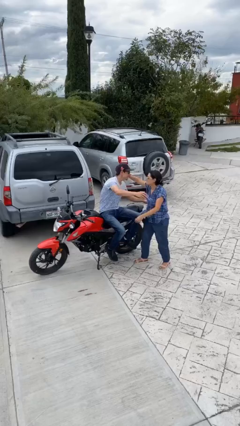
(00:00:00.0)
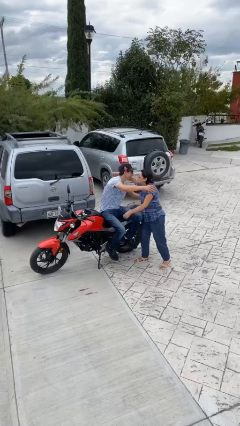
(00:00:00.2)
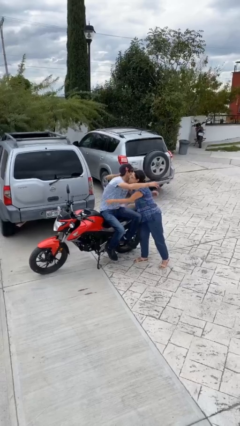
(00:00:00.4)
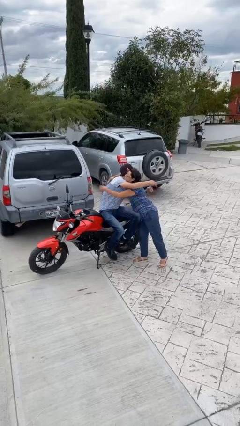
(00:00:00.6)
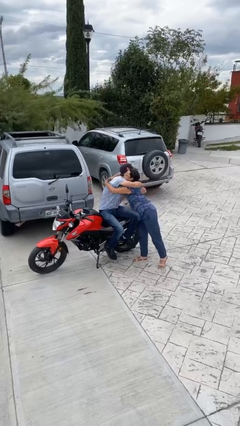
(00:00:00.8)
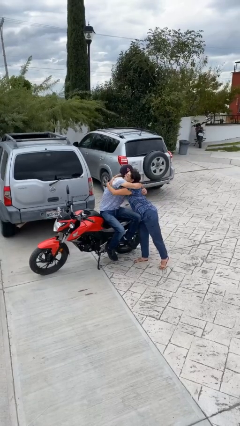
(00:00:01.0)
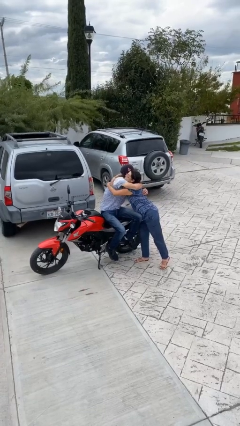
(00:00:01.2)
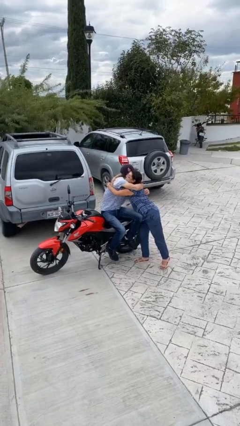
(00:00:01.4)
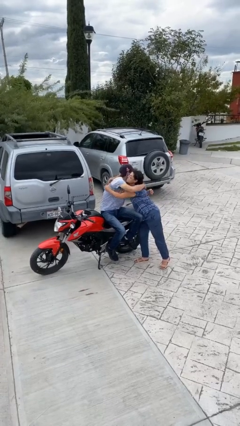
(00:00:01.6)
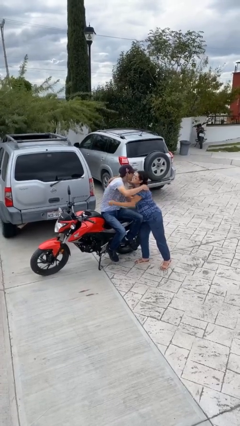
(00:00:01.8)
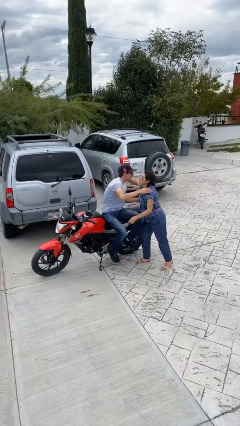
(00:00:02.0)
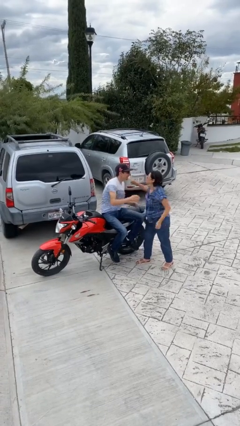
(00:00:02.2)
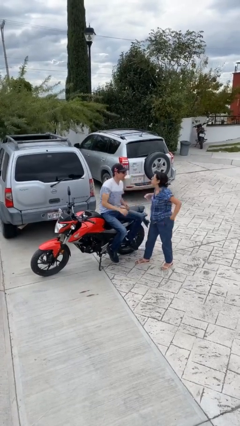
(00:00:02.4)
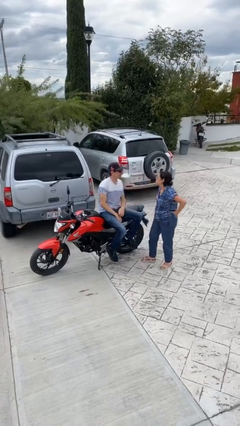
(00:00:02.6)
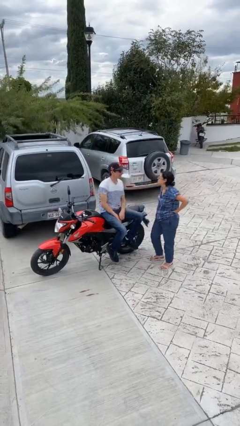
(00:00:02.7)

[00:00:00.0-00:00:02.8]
person embraces person

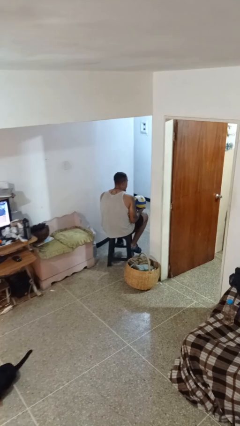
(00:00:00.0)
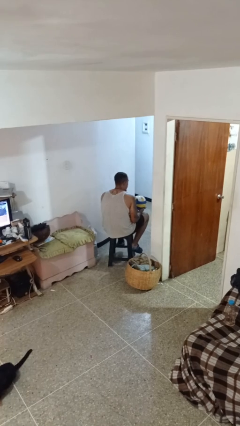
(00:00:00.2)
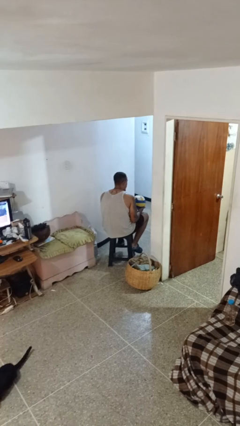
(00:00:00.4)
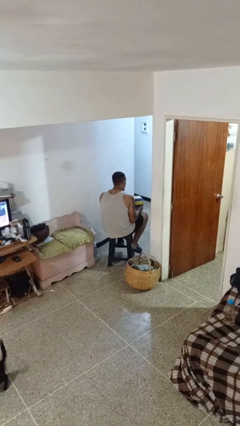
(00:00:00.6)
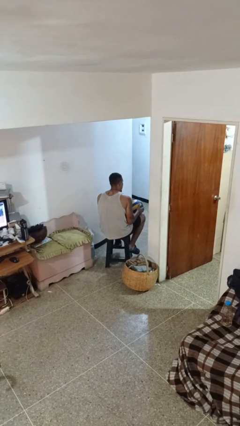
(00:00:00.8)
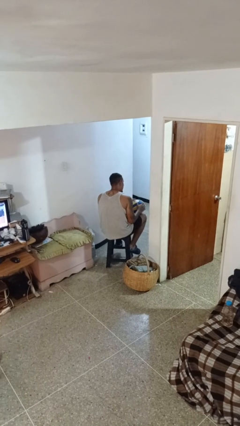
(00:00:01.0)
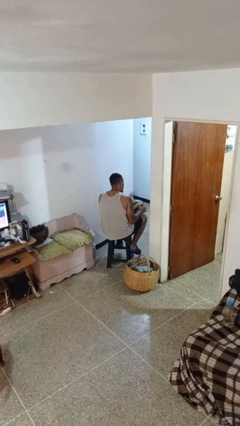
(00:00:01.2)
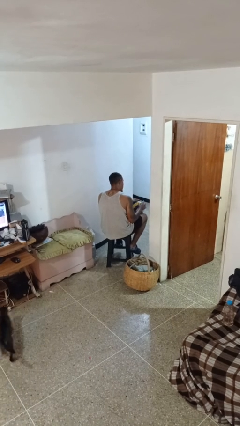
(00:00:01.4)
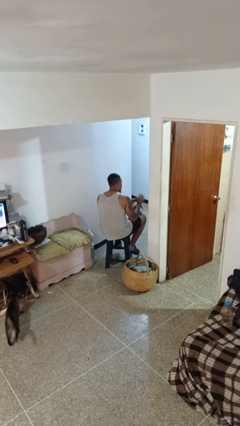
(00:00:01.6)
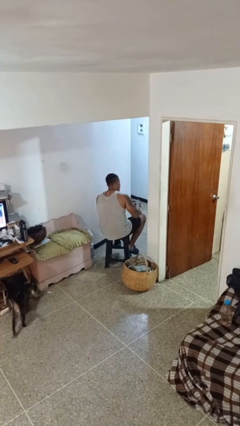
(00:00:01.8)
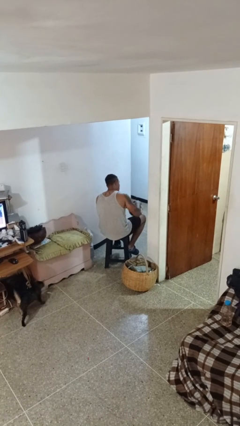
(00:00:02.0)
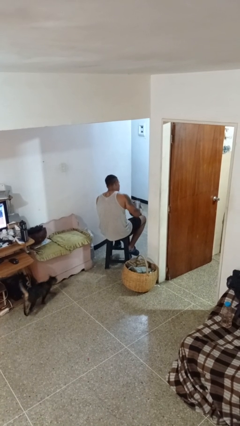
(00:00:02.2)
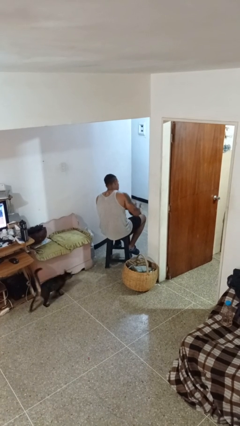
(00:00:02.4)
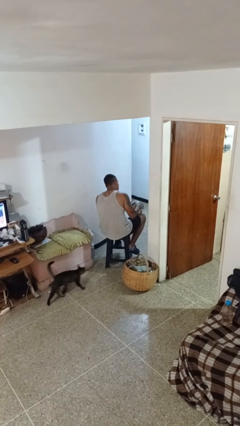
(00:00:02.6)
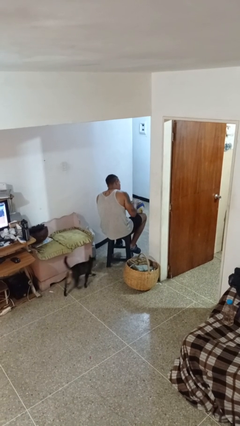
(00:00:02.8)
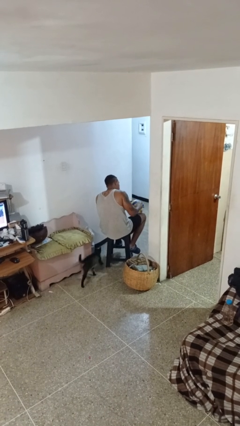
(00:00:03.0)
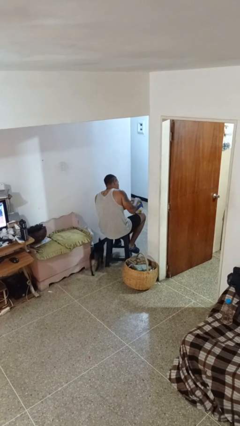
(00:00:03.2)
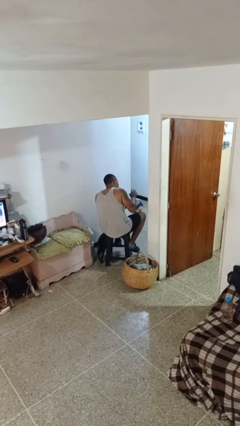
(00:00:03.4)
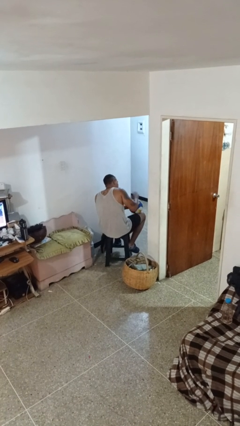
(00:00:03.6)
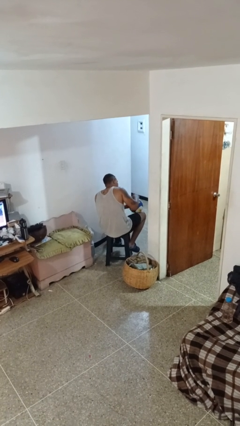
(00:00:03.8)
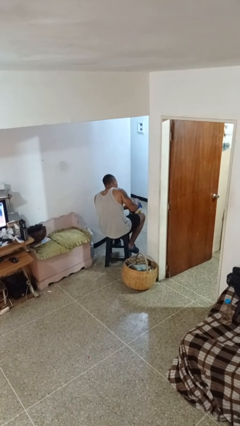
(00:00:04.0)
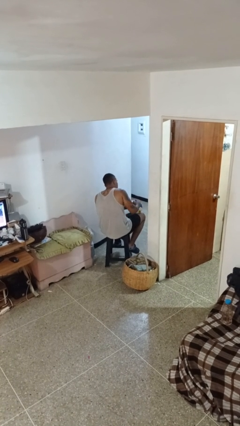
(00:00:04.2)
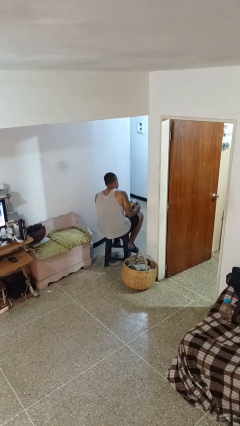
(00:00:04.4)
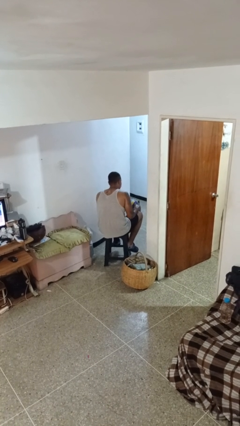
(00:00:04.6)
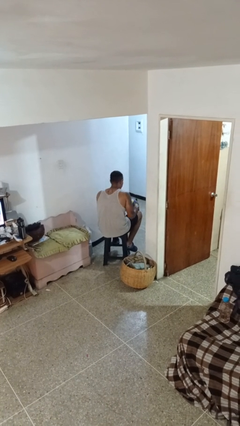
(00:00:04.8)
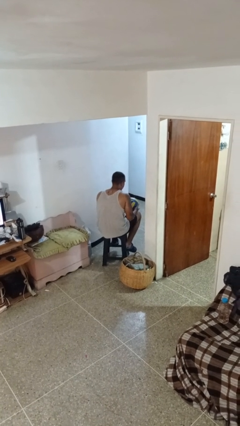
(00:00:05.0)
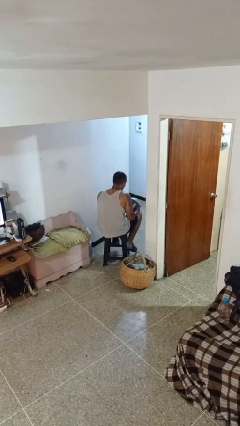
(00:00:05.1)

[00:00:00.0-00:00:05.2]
person taps object with finger

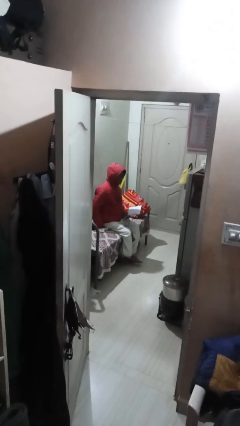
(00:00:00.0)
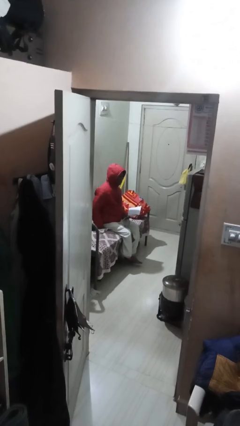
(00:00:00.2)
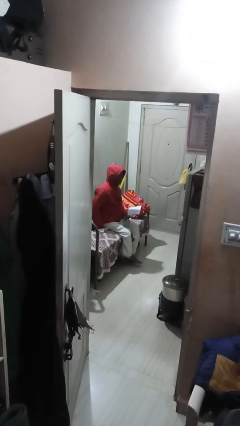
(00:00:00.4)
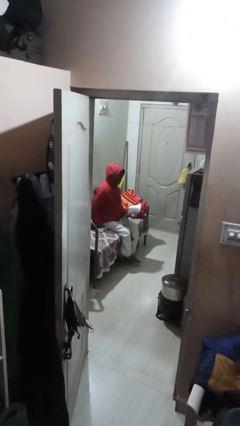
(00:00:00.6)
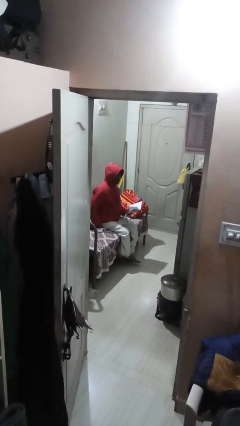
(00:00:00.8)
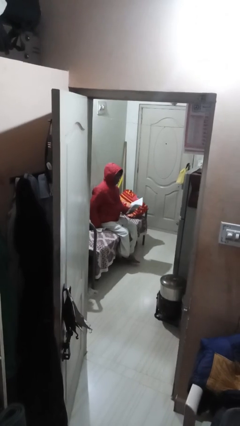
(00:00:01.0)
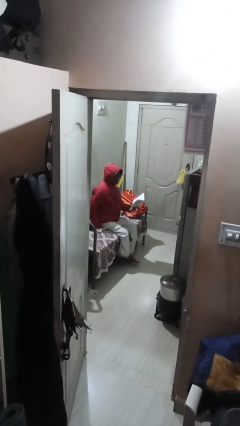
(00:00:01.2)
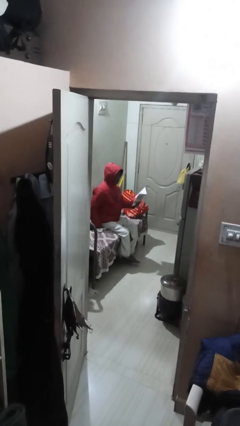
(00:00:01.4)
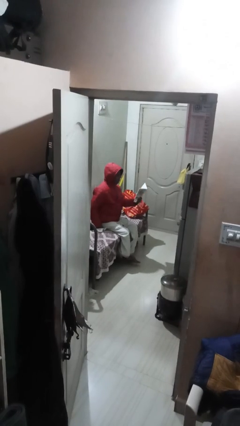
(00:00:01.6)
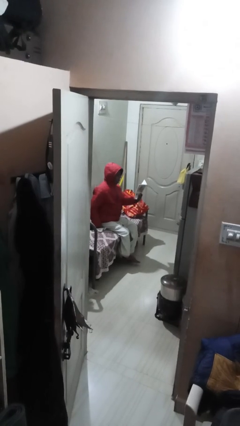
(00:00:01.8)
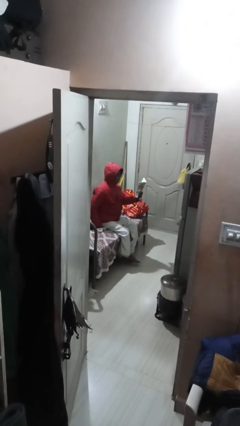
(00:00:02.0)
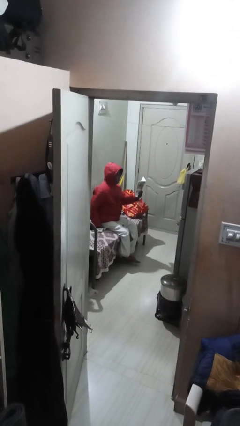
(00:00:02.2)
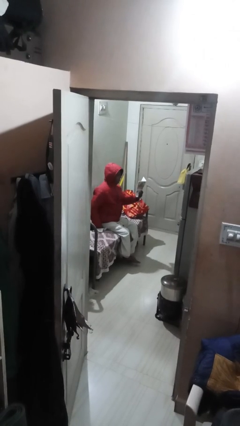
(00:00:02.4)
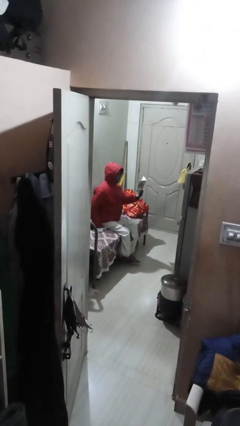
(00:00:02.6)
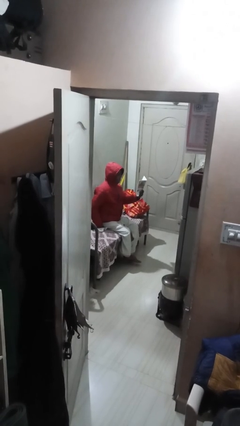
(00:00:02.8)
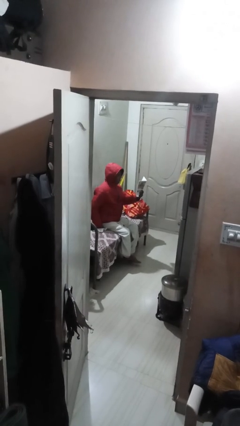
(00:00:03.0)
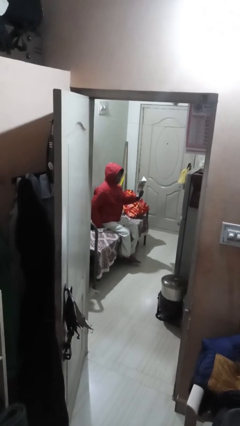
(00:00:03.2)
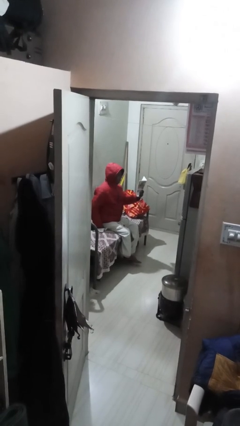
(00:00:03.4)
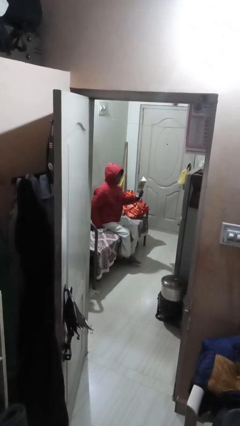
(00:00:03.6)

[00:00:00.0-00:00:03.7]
person reads document

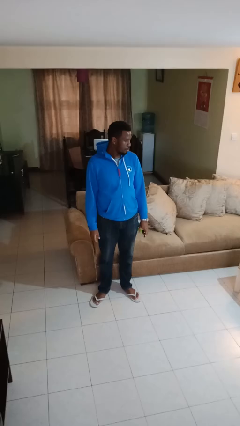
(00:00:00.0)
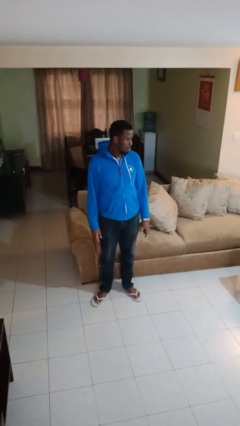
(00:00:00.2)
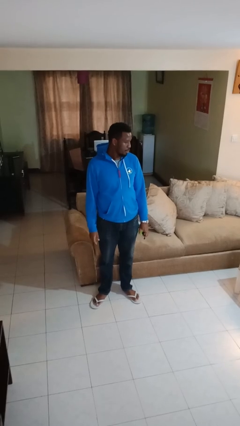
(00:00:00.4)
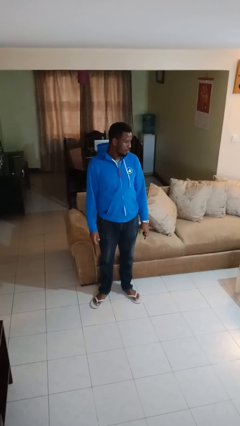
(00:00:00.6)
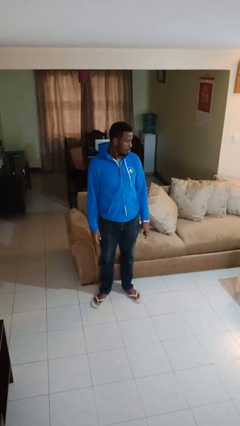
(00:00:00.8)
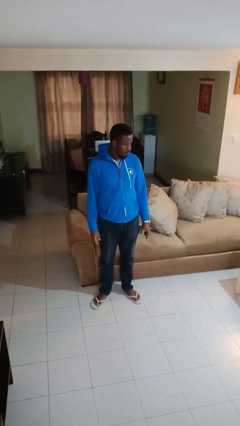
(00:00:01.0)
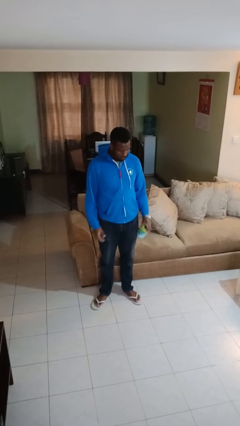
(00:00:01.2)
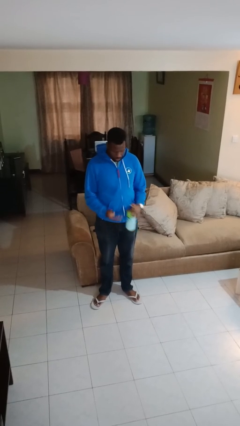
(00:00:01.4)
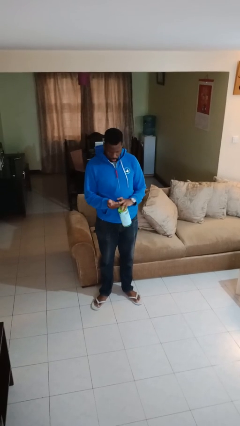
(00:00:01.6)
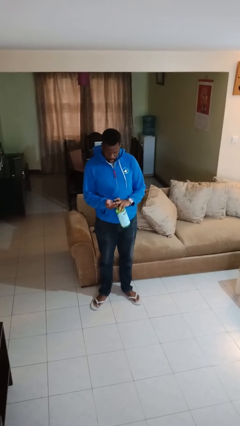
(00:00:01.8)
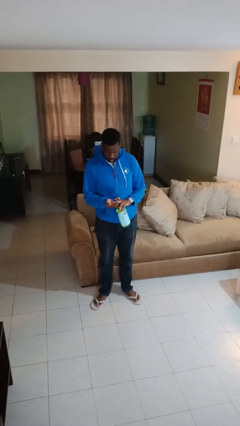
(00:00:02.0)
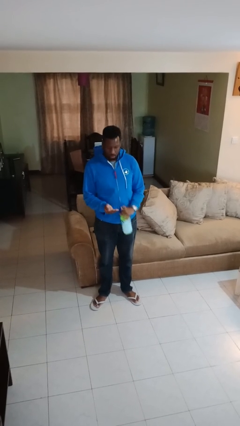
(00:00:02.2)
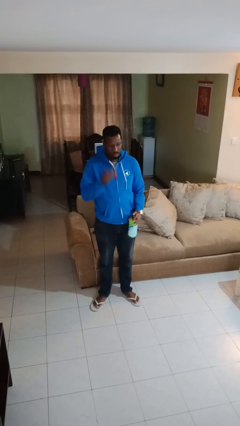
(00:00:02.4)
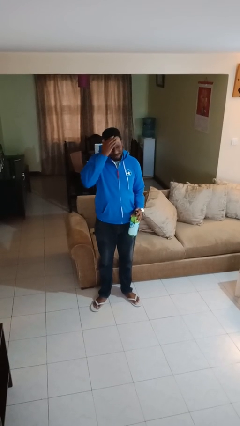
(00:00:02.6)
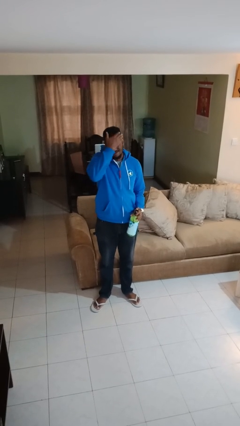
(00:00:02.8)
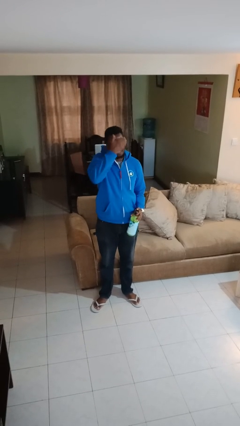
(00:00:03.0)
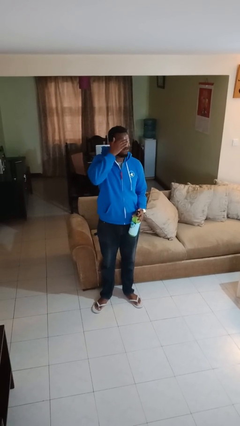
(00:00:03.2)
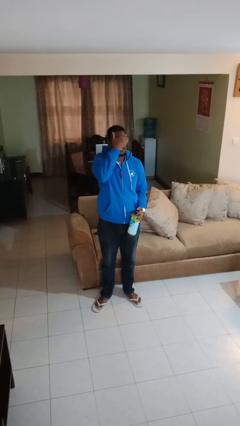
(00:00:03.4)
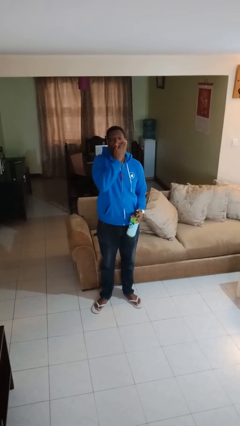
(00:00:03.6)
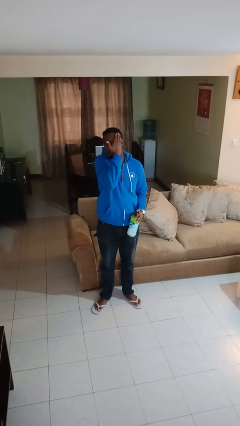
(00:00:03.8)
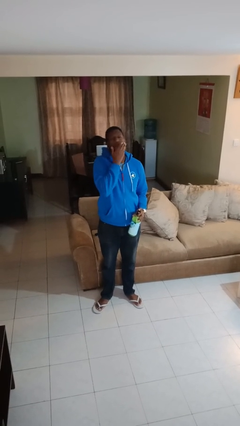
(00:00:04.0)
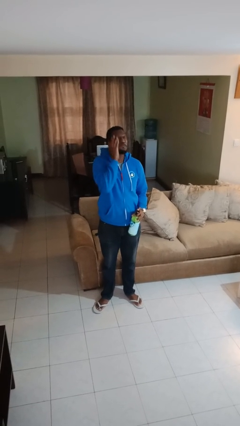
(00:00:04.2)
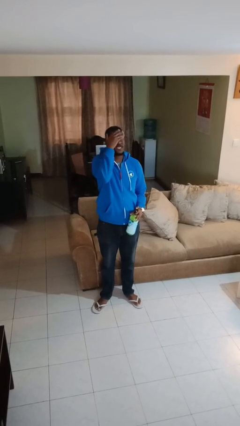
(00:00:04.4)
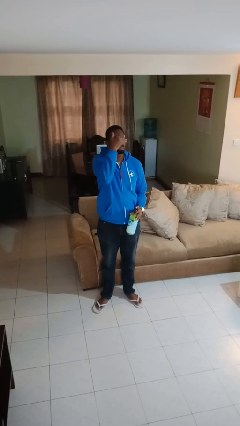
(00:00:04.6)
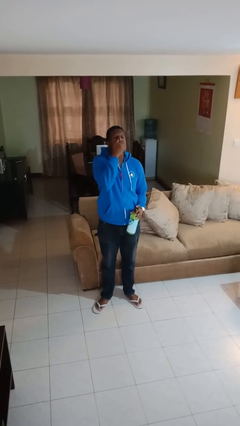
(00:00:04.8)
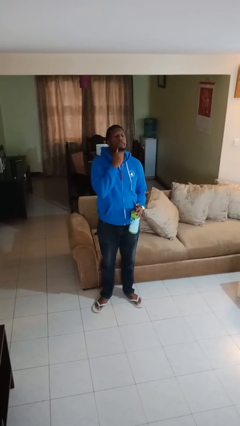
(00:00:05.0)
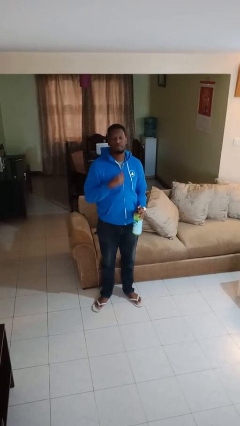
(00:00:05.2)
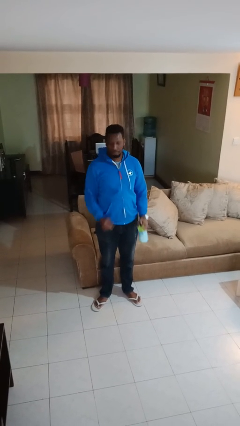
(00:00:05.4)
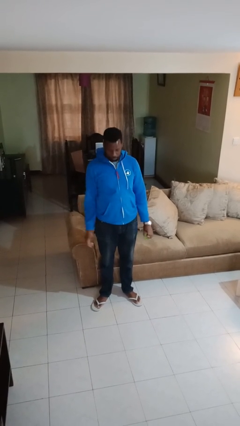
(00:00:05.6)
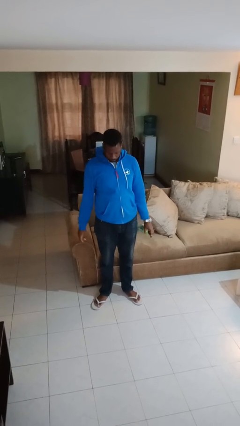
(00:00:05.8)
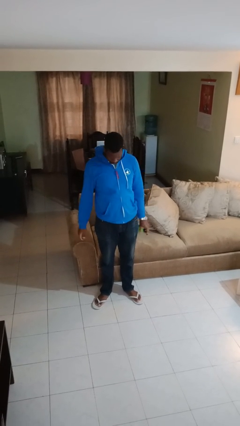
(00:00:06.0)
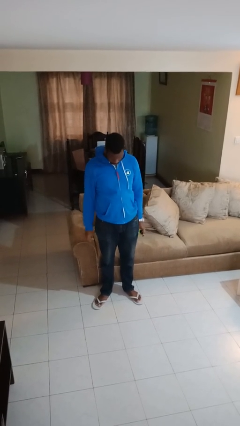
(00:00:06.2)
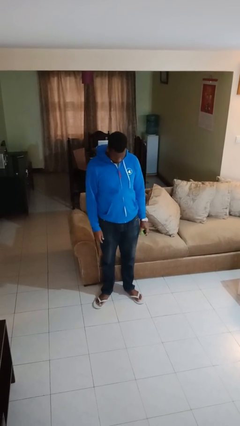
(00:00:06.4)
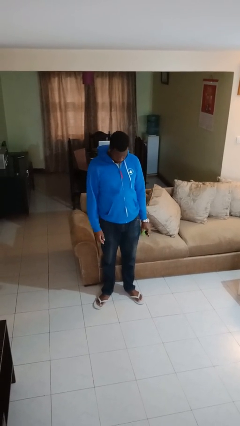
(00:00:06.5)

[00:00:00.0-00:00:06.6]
person applies facial moisturizer
